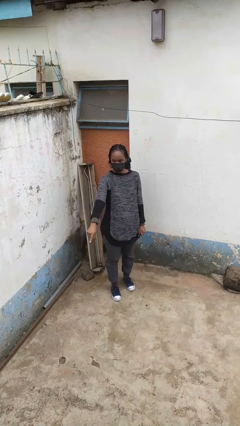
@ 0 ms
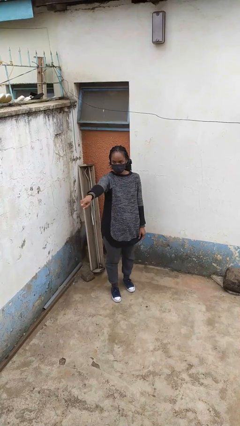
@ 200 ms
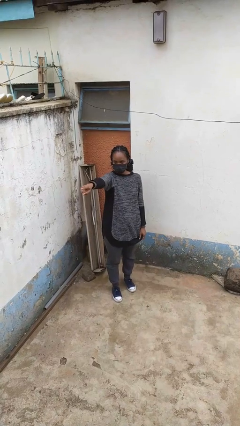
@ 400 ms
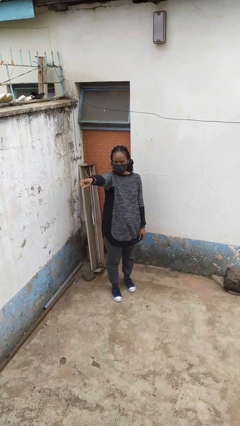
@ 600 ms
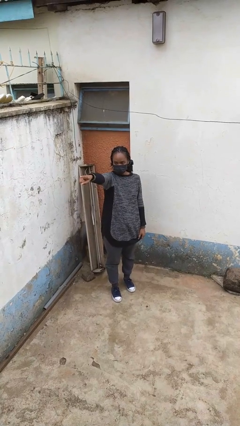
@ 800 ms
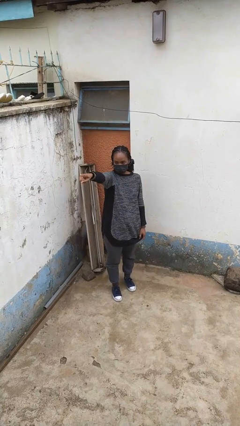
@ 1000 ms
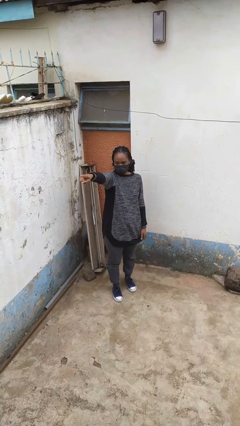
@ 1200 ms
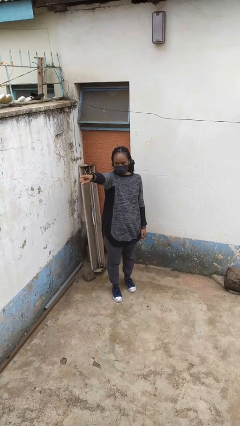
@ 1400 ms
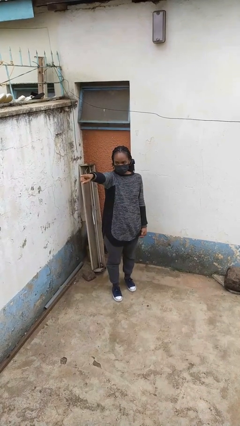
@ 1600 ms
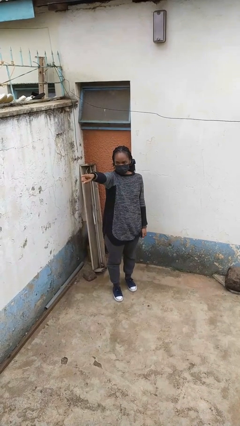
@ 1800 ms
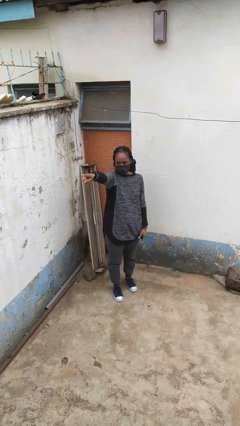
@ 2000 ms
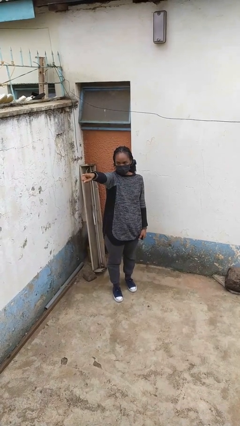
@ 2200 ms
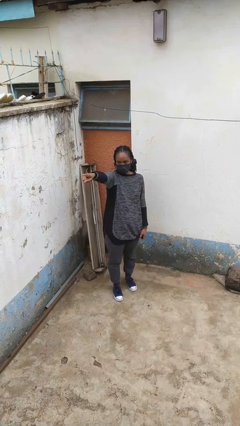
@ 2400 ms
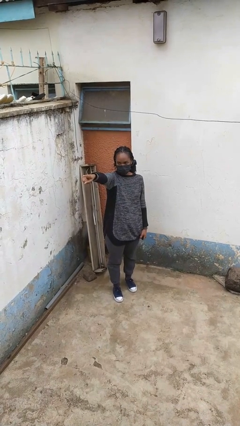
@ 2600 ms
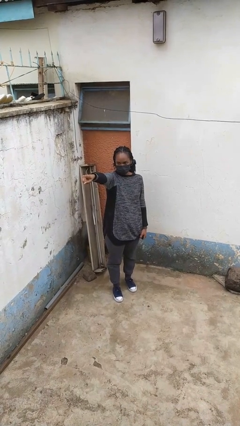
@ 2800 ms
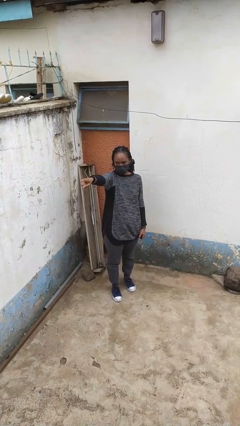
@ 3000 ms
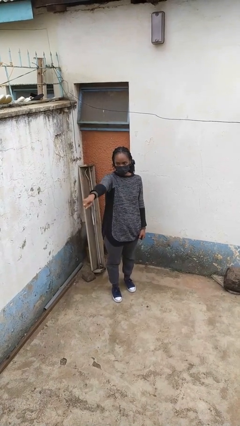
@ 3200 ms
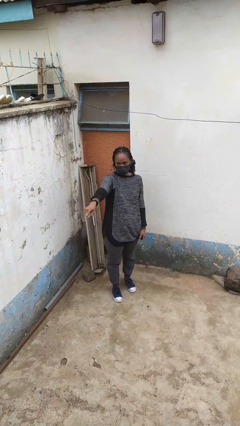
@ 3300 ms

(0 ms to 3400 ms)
person points at person

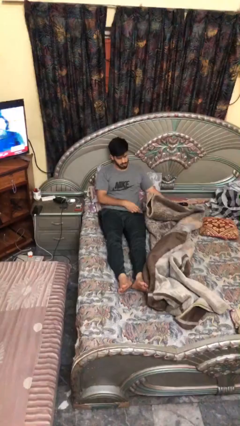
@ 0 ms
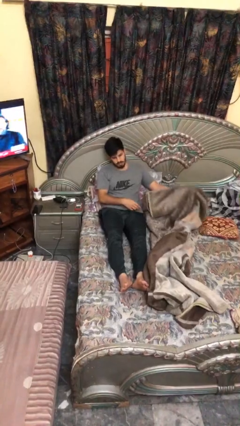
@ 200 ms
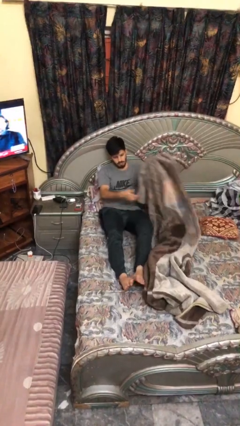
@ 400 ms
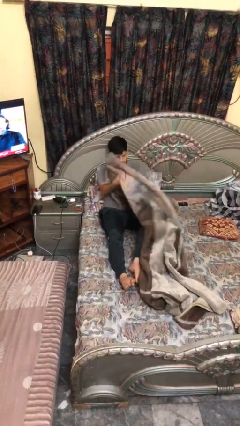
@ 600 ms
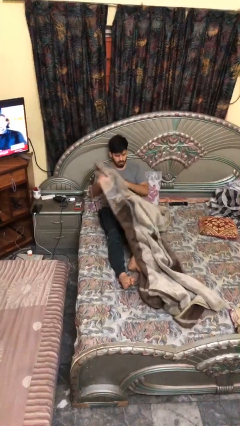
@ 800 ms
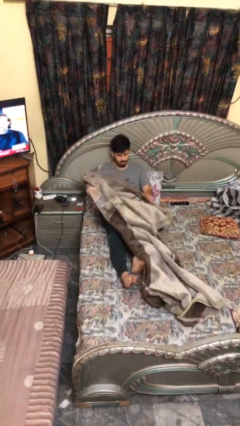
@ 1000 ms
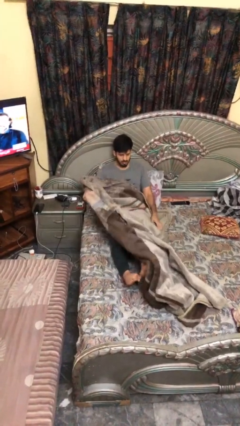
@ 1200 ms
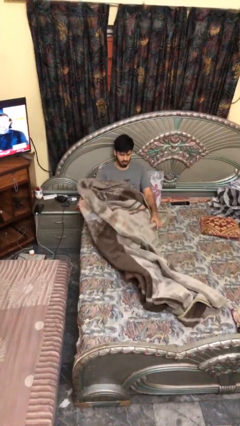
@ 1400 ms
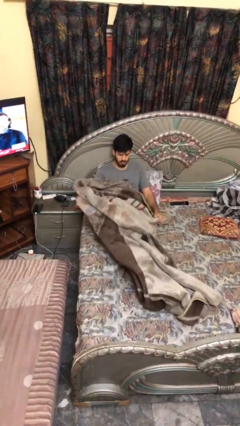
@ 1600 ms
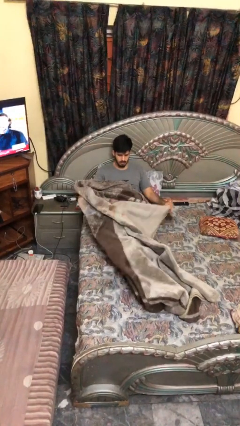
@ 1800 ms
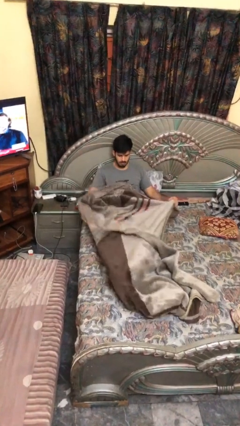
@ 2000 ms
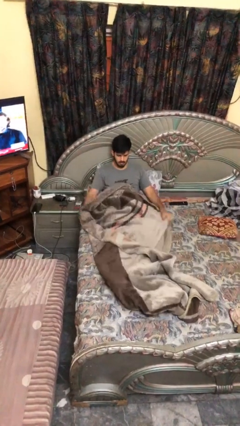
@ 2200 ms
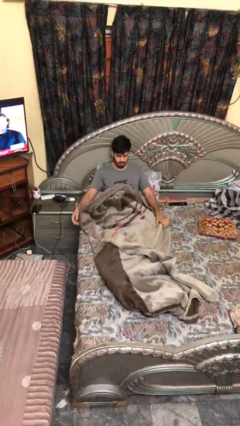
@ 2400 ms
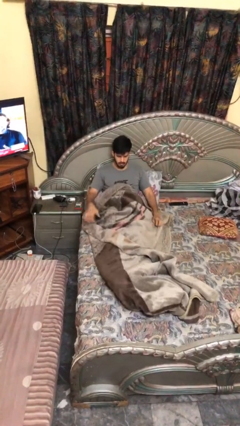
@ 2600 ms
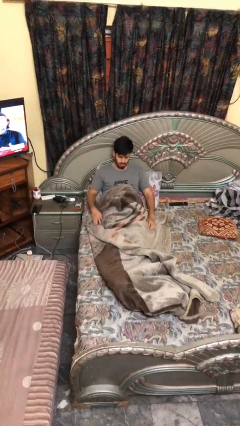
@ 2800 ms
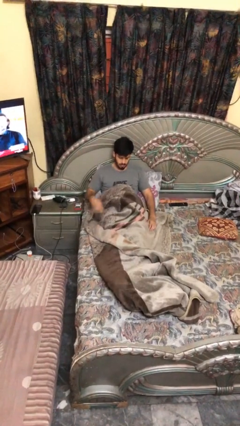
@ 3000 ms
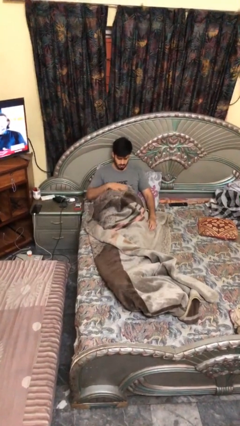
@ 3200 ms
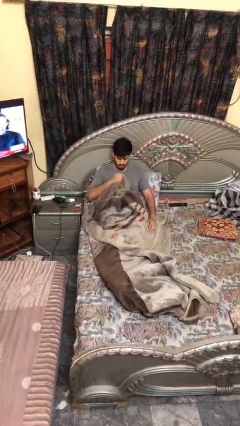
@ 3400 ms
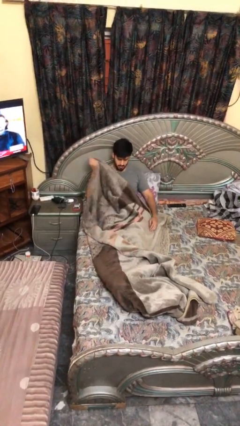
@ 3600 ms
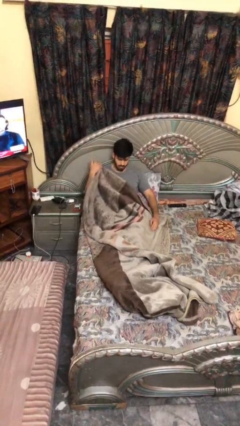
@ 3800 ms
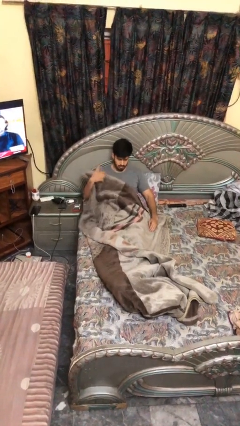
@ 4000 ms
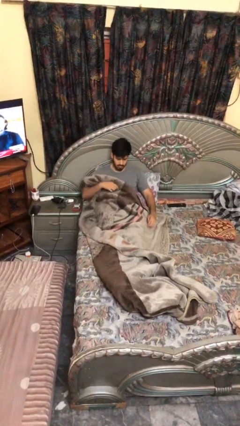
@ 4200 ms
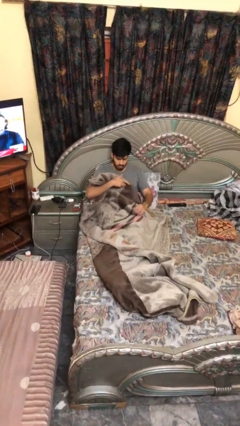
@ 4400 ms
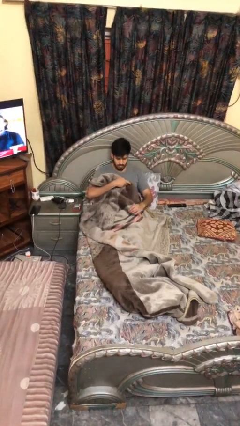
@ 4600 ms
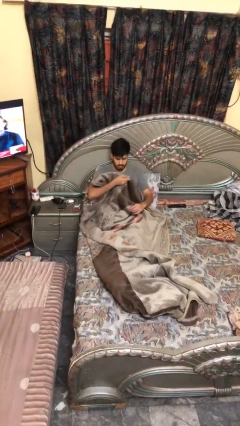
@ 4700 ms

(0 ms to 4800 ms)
person covers with blanket

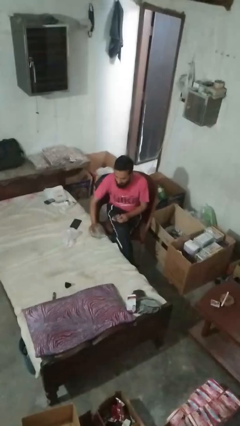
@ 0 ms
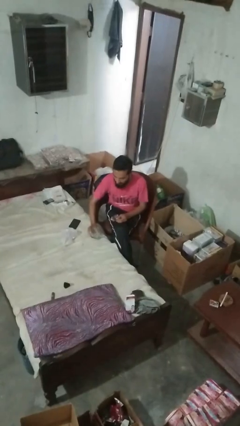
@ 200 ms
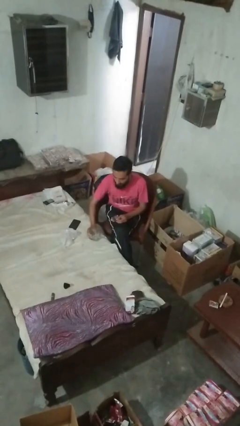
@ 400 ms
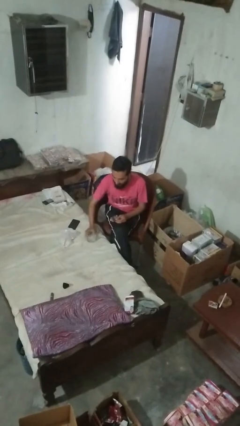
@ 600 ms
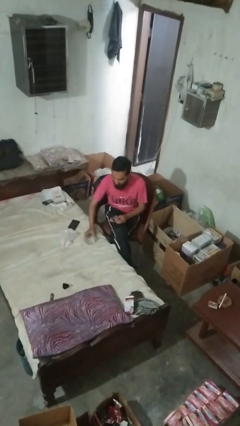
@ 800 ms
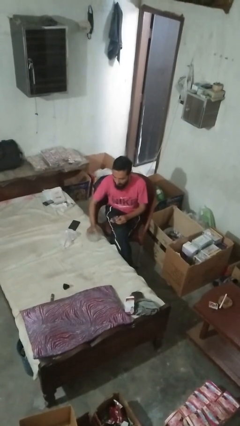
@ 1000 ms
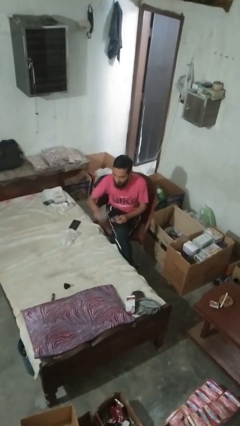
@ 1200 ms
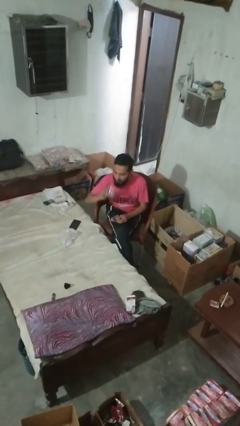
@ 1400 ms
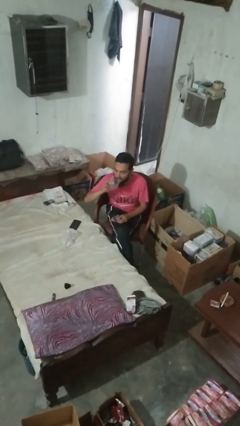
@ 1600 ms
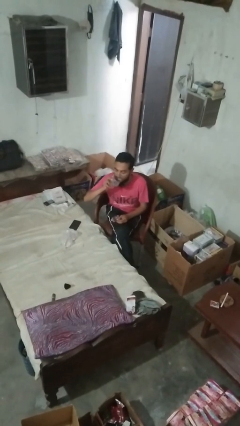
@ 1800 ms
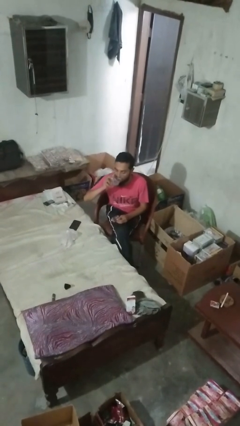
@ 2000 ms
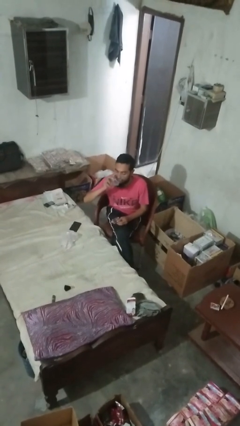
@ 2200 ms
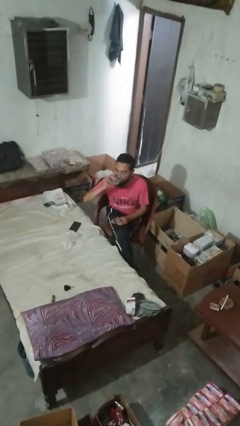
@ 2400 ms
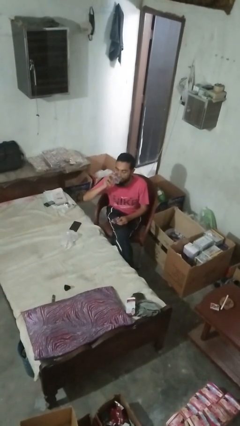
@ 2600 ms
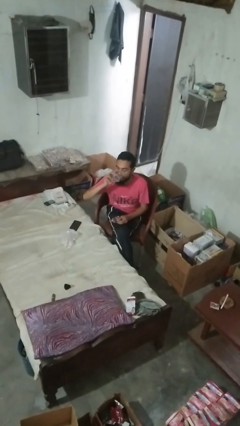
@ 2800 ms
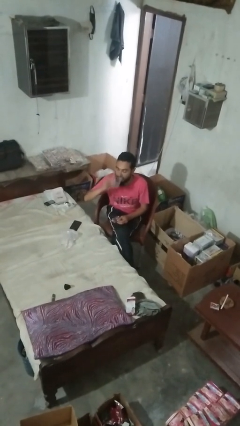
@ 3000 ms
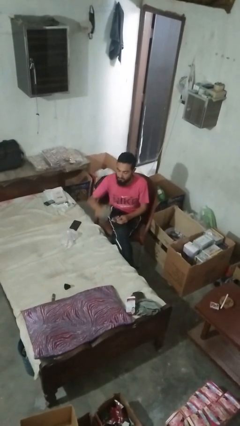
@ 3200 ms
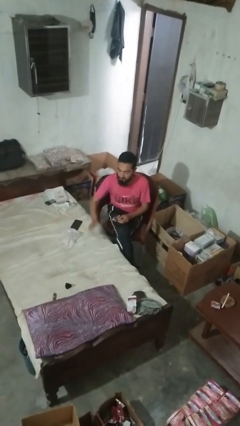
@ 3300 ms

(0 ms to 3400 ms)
person drinks from cup

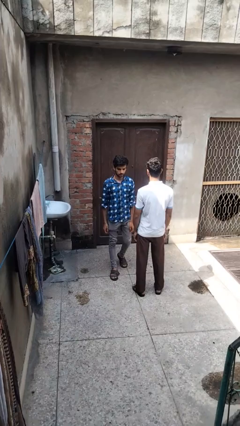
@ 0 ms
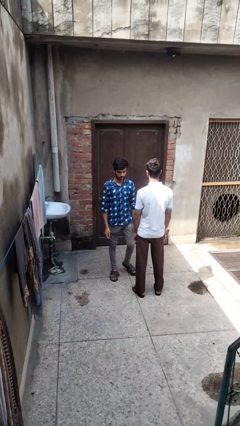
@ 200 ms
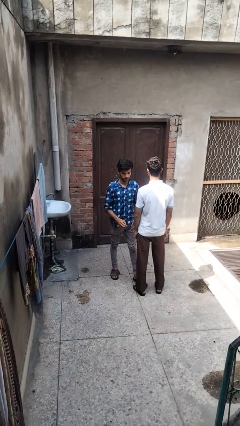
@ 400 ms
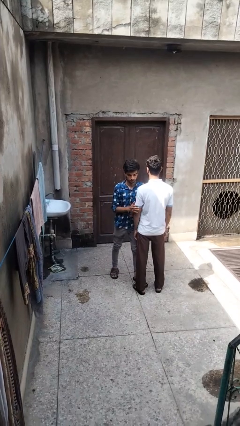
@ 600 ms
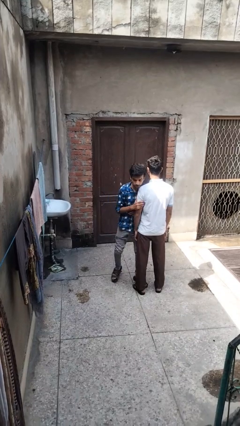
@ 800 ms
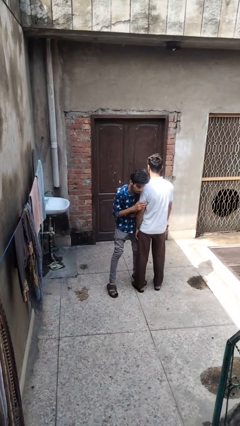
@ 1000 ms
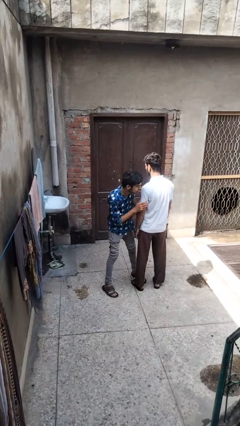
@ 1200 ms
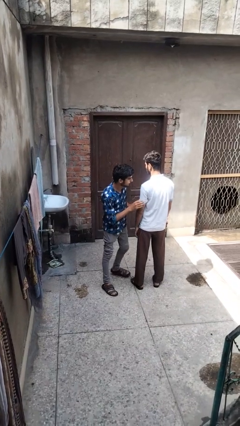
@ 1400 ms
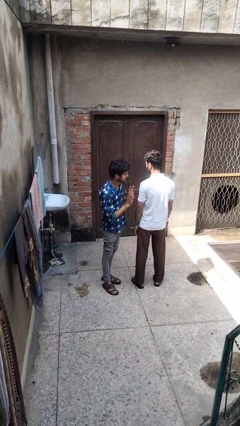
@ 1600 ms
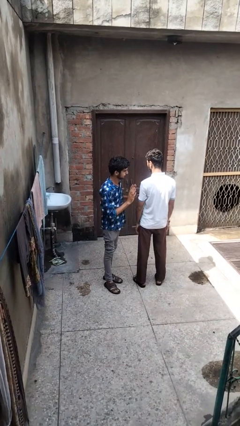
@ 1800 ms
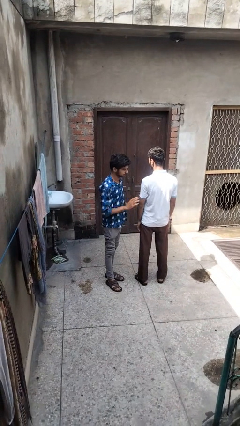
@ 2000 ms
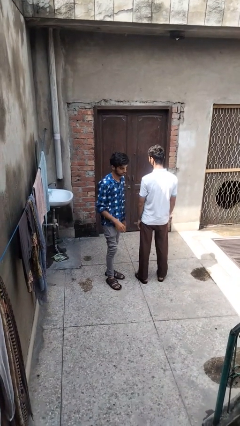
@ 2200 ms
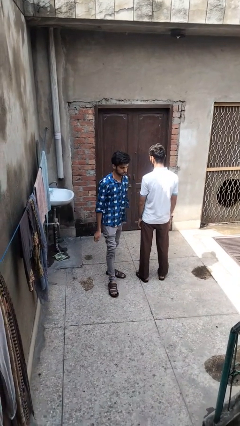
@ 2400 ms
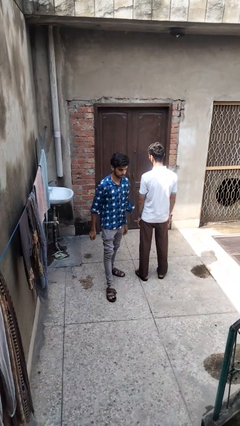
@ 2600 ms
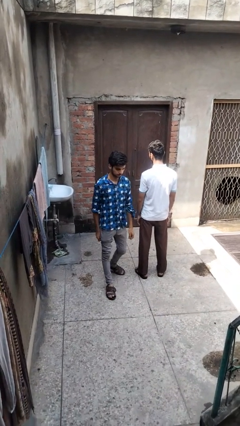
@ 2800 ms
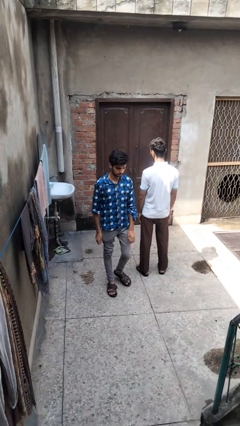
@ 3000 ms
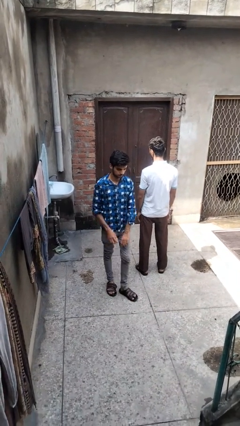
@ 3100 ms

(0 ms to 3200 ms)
person bumps into person

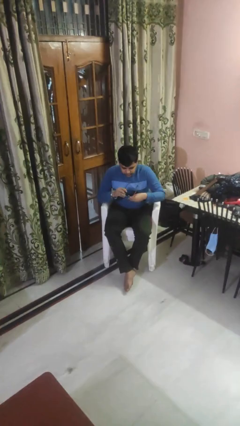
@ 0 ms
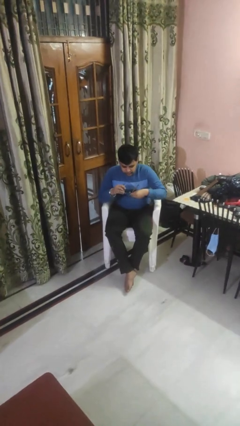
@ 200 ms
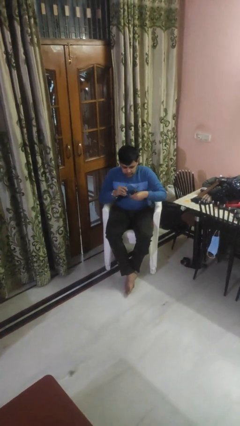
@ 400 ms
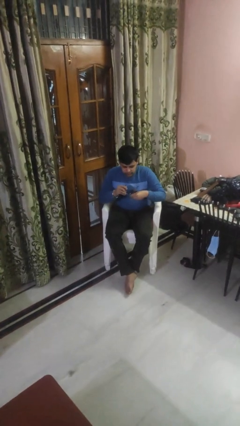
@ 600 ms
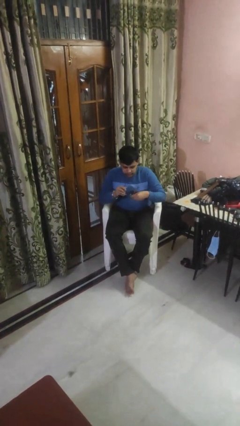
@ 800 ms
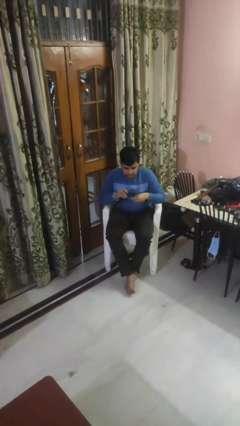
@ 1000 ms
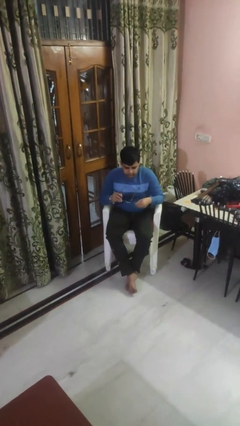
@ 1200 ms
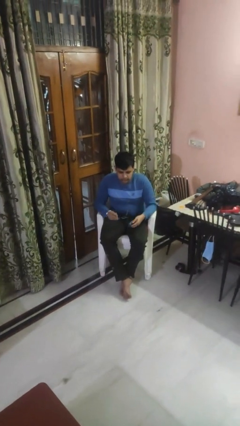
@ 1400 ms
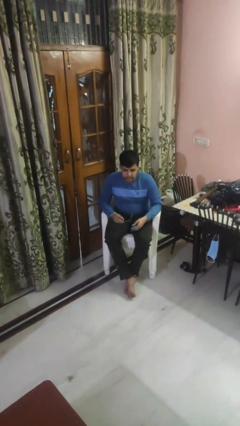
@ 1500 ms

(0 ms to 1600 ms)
person cleans eyeglasses

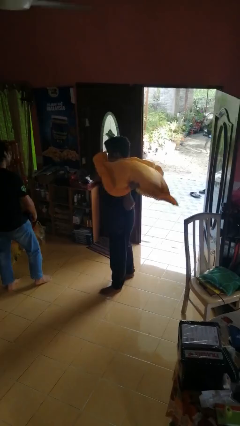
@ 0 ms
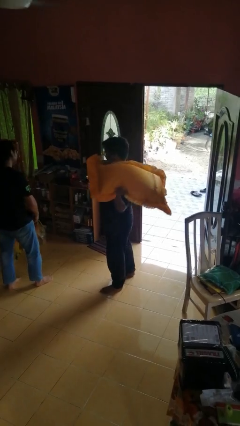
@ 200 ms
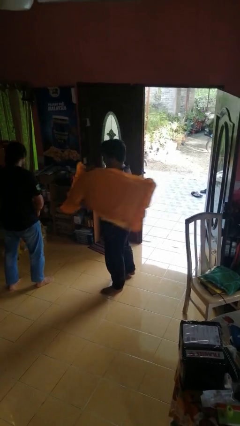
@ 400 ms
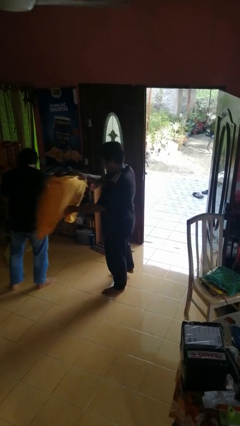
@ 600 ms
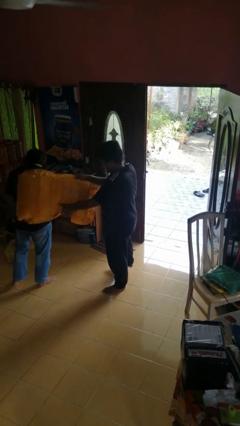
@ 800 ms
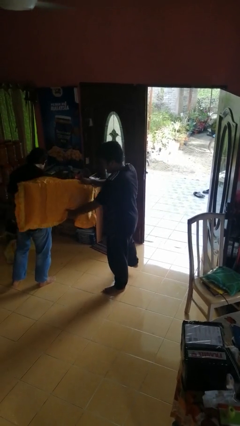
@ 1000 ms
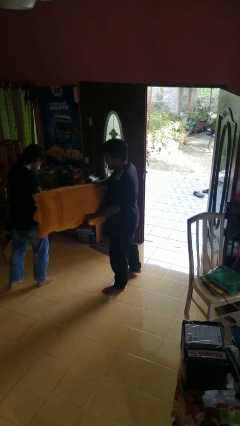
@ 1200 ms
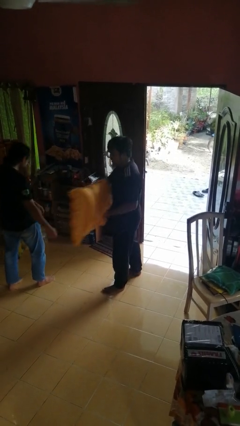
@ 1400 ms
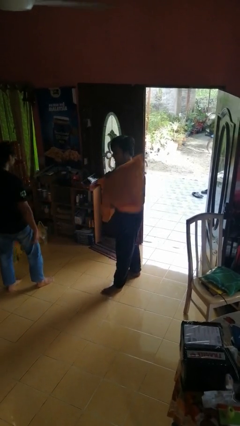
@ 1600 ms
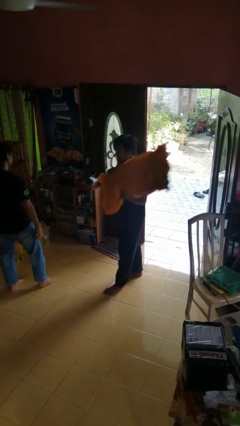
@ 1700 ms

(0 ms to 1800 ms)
person hits person with pillow
